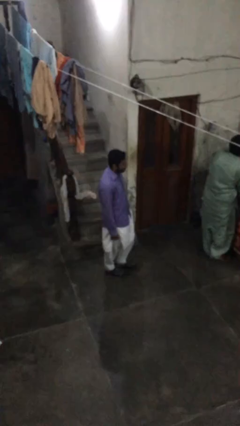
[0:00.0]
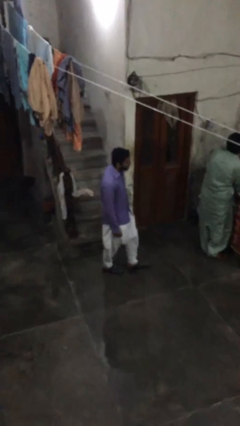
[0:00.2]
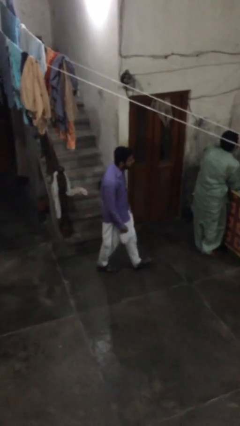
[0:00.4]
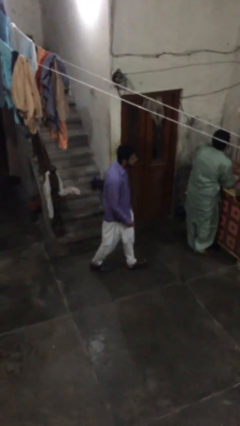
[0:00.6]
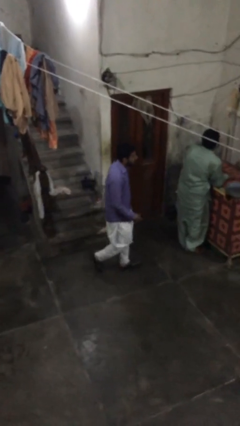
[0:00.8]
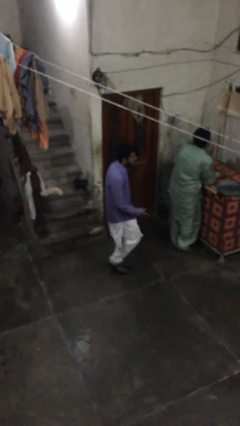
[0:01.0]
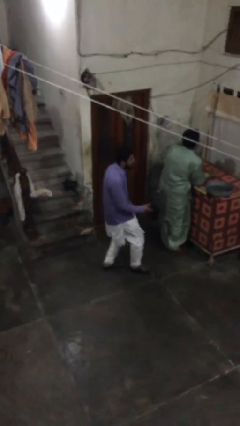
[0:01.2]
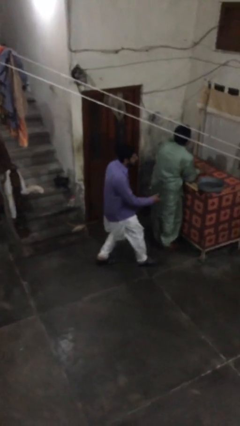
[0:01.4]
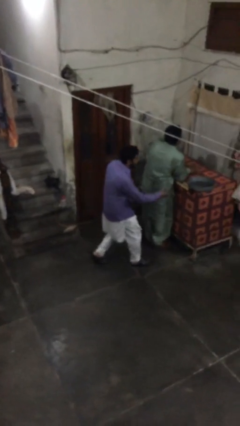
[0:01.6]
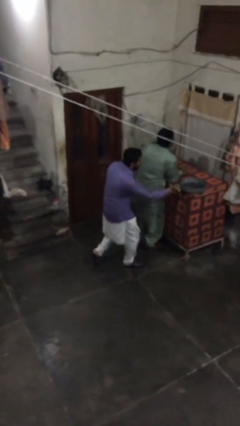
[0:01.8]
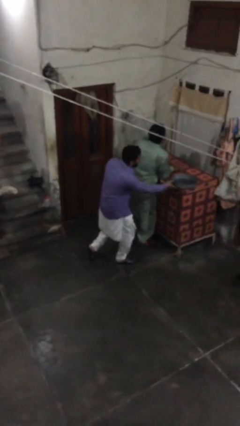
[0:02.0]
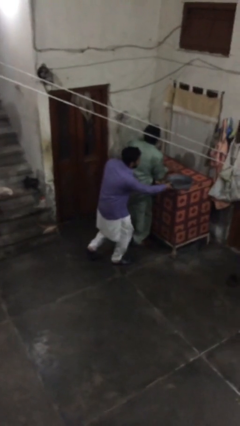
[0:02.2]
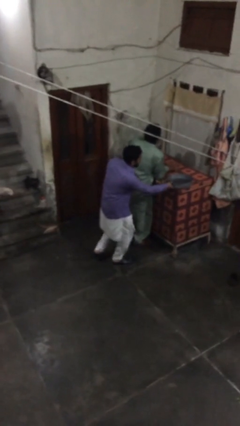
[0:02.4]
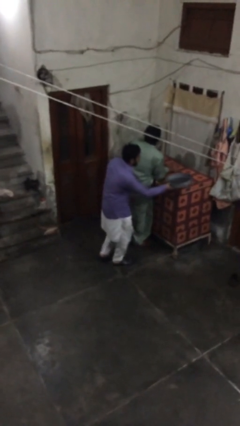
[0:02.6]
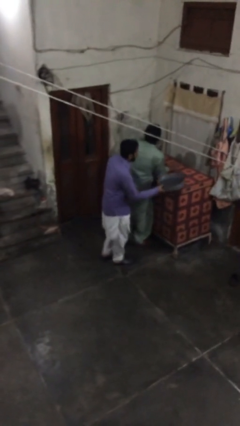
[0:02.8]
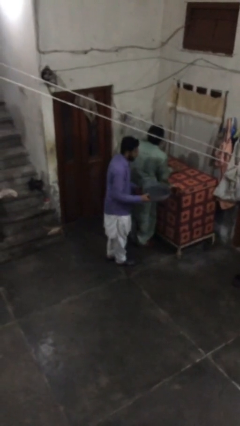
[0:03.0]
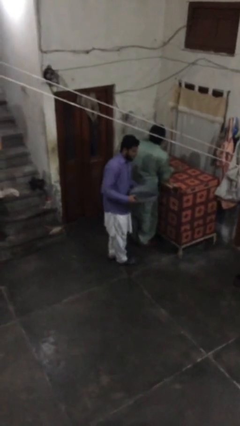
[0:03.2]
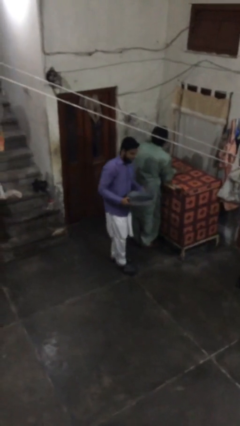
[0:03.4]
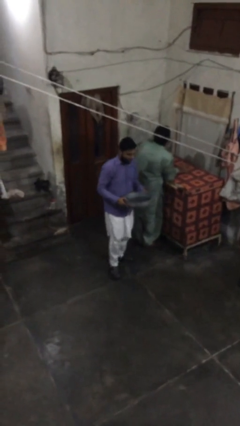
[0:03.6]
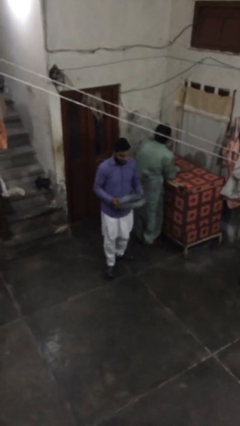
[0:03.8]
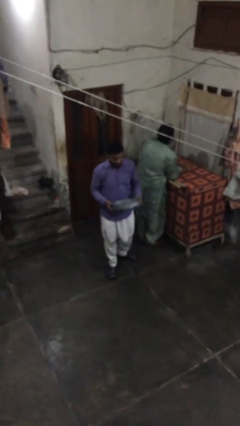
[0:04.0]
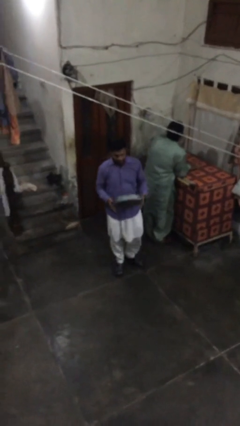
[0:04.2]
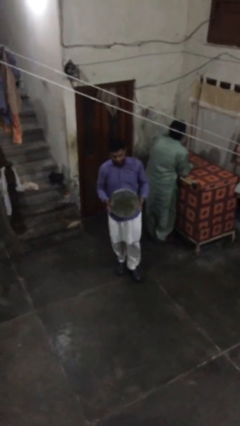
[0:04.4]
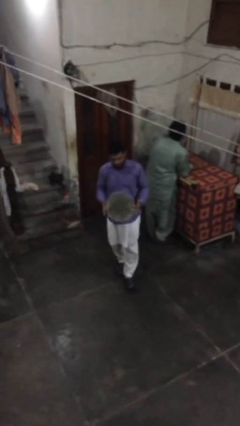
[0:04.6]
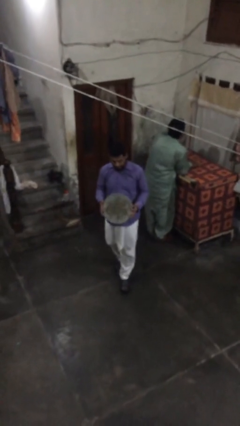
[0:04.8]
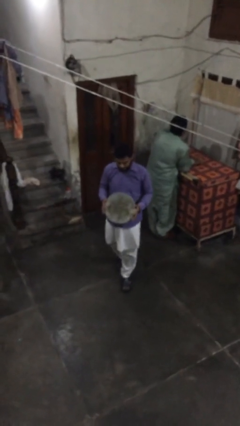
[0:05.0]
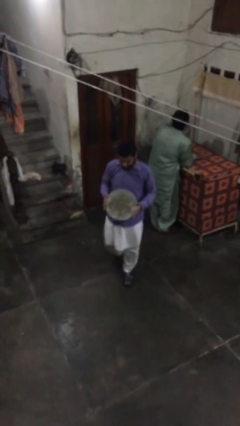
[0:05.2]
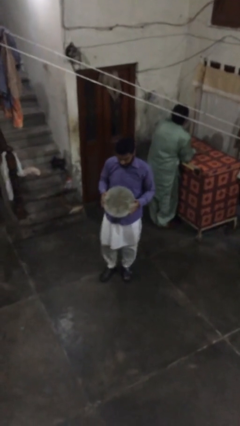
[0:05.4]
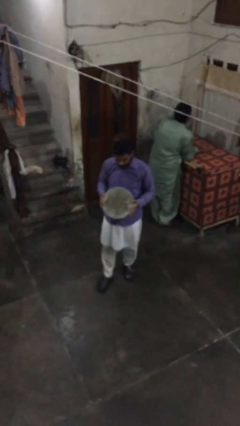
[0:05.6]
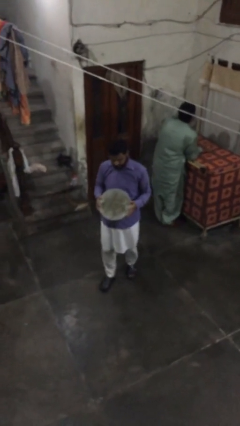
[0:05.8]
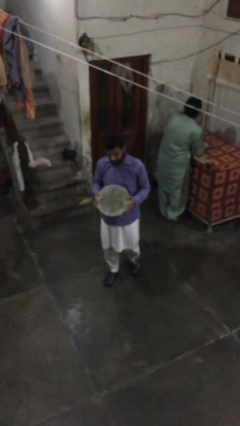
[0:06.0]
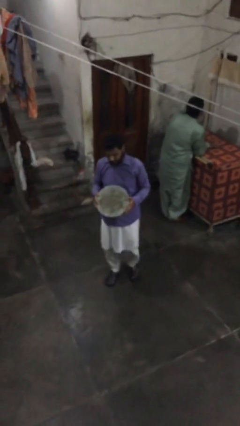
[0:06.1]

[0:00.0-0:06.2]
person steals object from person

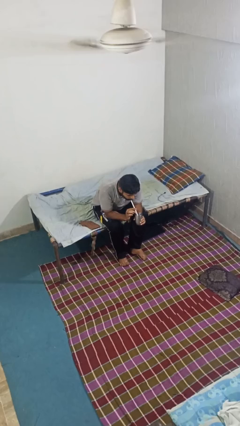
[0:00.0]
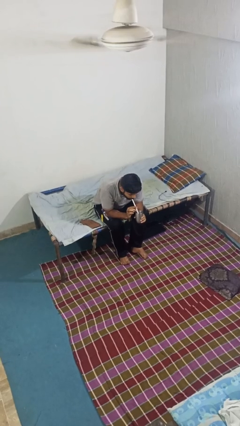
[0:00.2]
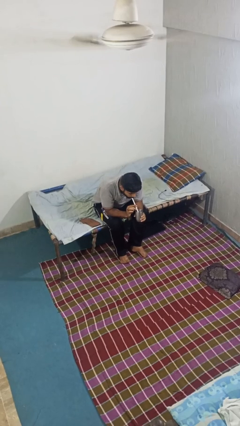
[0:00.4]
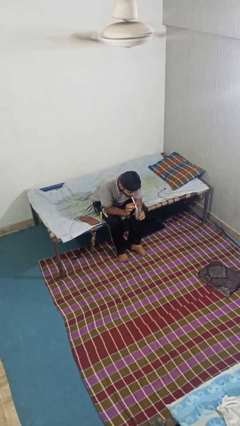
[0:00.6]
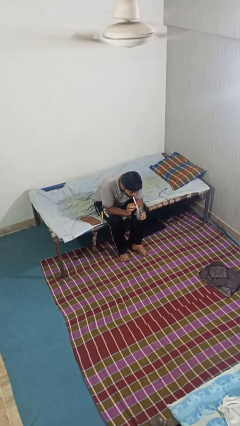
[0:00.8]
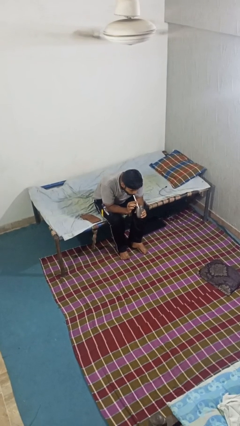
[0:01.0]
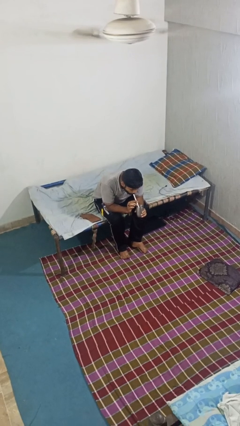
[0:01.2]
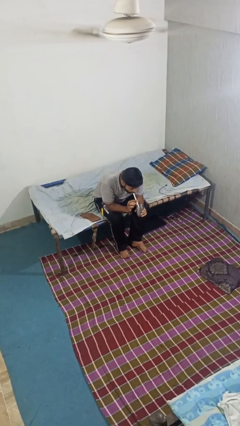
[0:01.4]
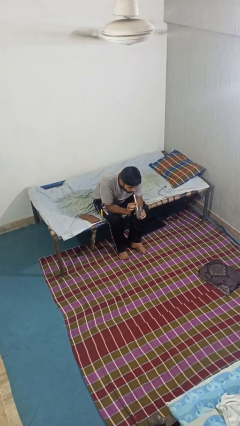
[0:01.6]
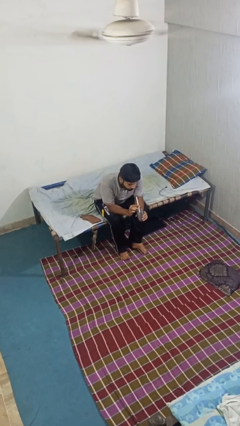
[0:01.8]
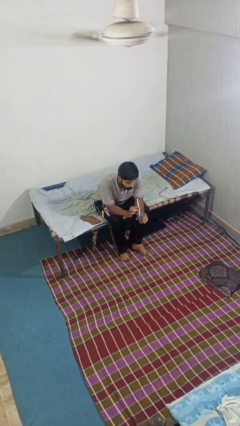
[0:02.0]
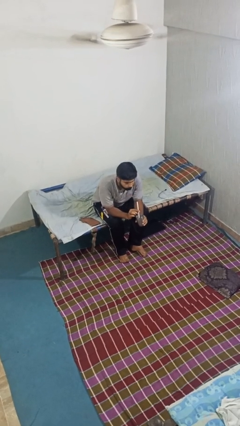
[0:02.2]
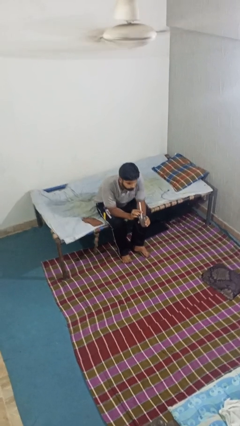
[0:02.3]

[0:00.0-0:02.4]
person drinks from straw

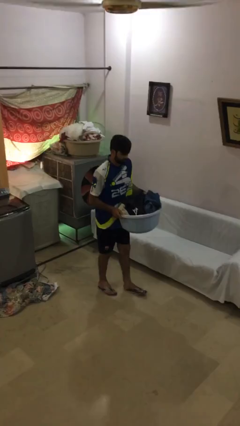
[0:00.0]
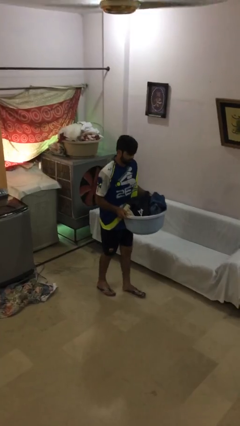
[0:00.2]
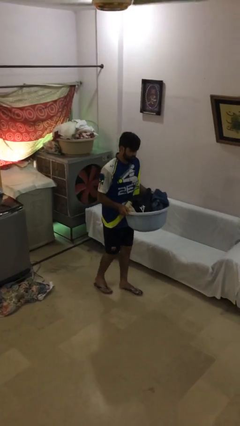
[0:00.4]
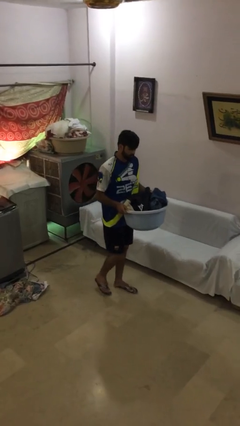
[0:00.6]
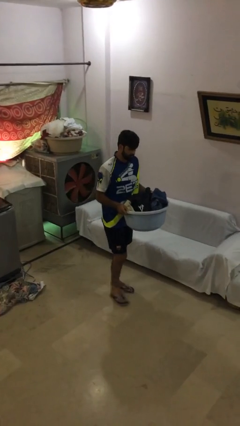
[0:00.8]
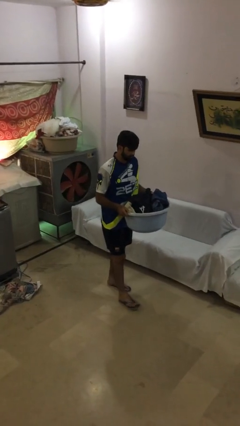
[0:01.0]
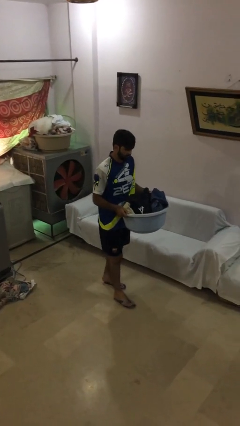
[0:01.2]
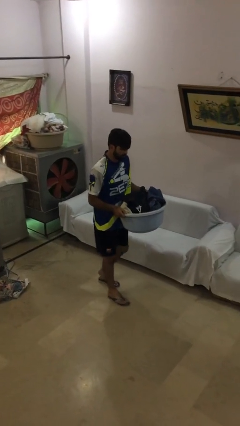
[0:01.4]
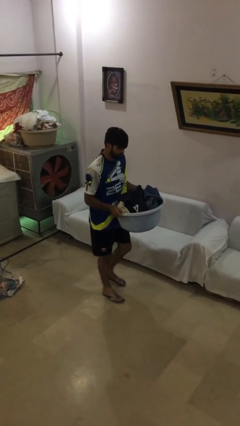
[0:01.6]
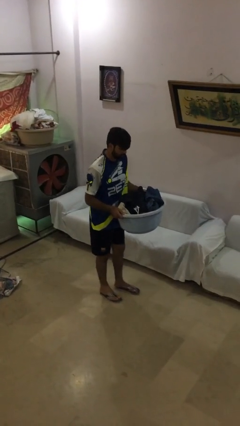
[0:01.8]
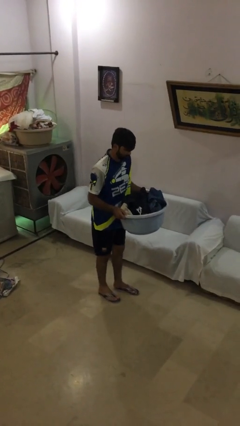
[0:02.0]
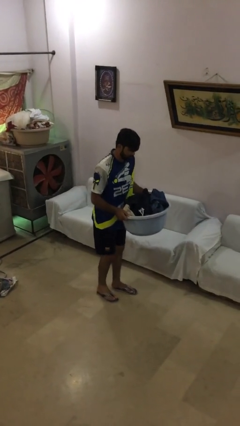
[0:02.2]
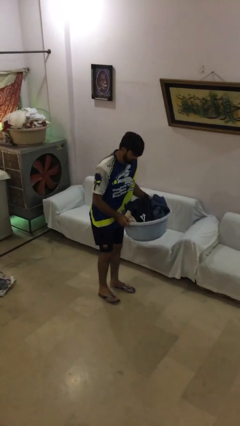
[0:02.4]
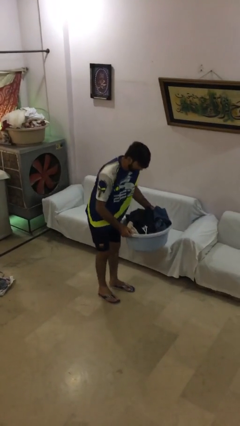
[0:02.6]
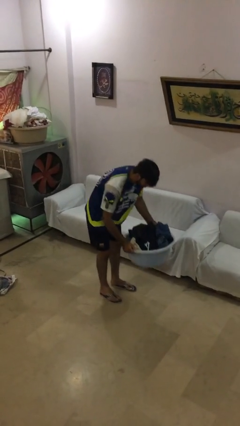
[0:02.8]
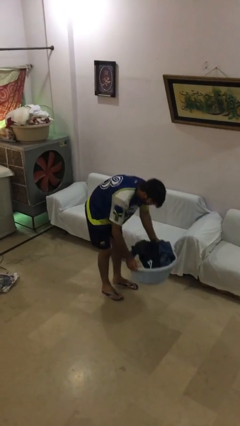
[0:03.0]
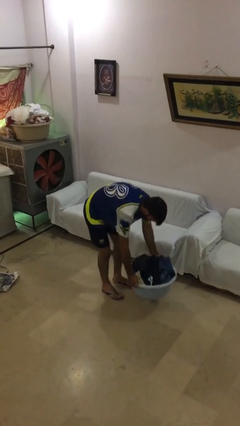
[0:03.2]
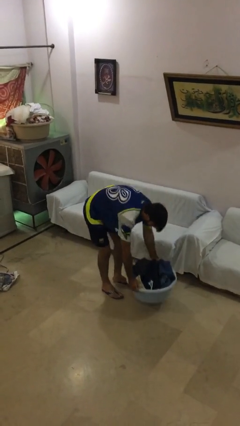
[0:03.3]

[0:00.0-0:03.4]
person puts down object on floor

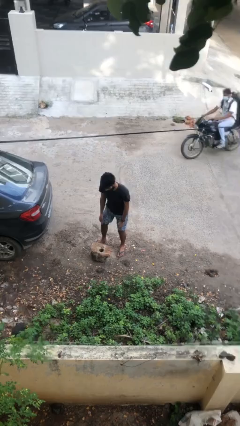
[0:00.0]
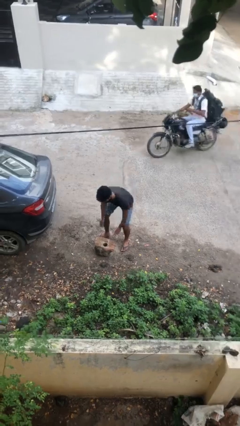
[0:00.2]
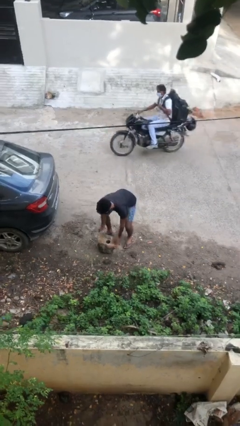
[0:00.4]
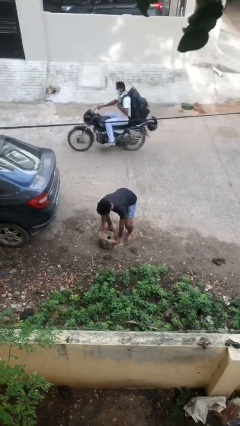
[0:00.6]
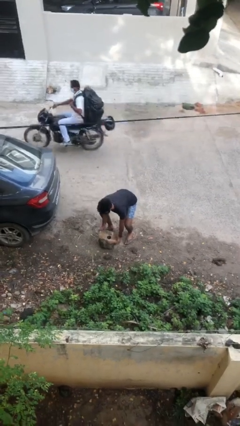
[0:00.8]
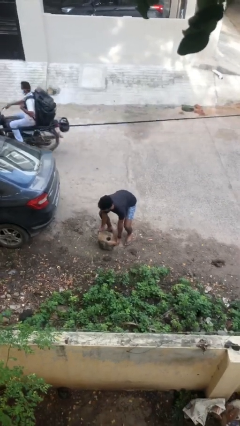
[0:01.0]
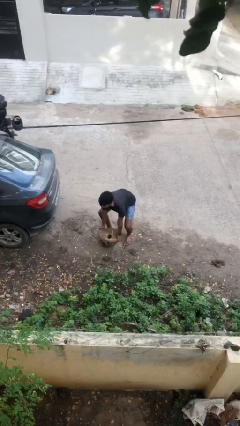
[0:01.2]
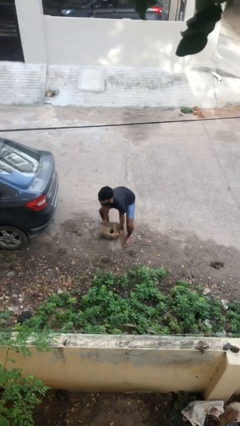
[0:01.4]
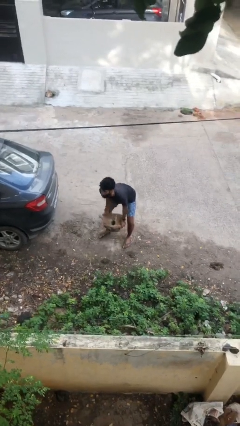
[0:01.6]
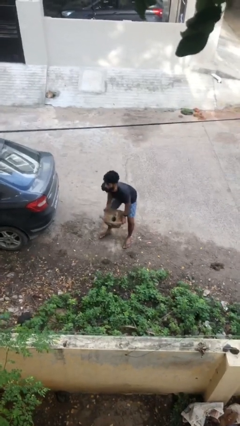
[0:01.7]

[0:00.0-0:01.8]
person picks up object from floor

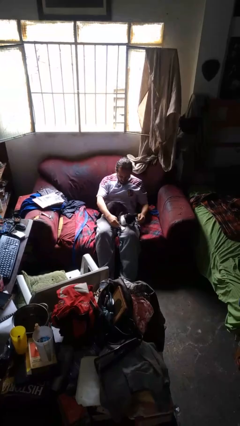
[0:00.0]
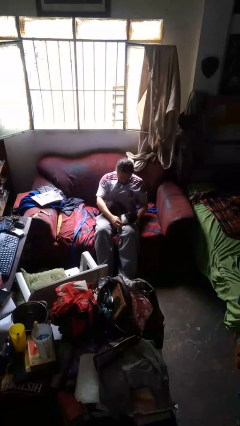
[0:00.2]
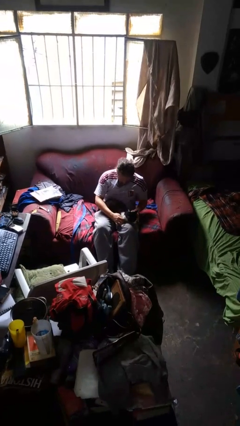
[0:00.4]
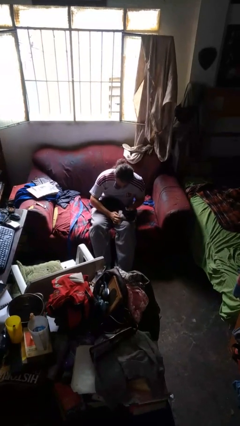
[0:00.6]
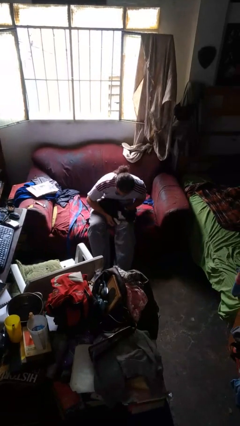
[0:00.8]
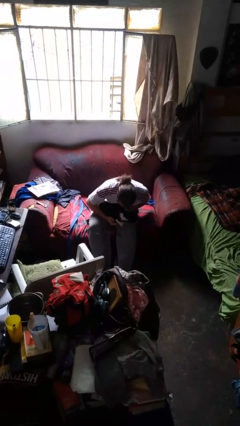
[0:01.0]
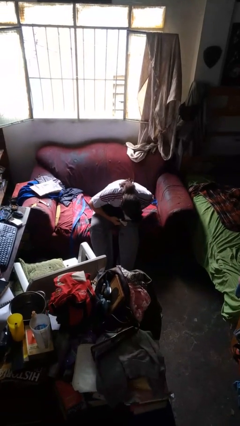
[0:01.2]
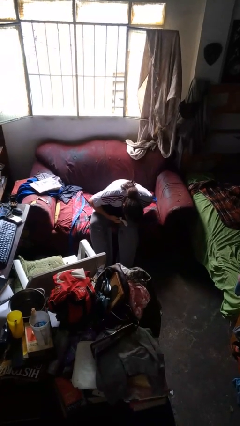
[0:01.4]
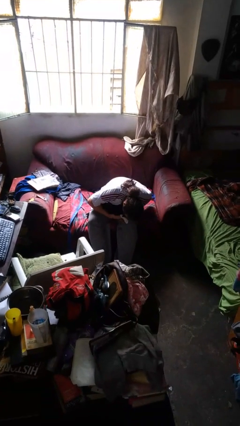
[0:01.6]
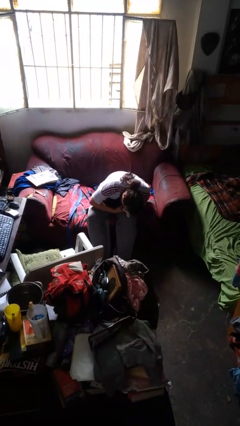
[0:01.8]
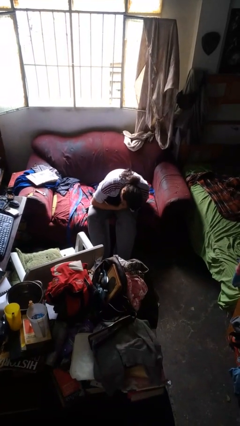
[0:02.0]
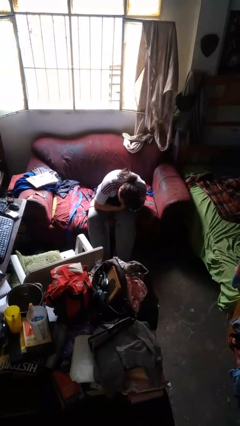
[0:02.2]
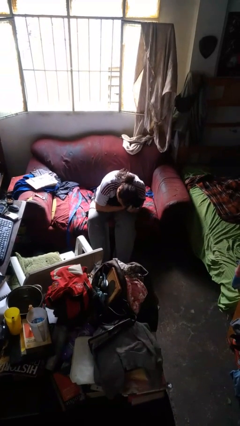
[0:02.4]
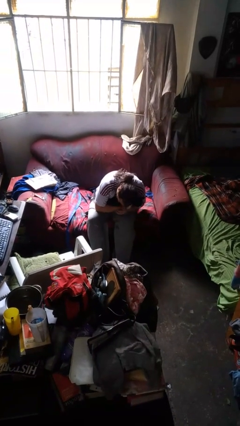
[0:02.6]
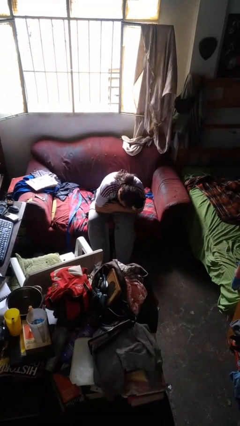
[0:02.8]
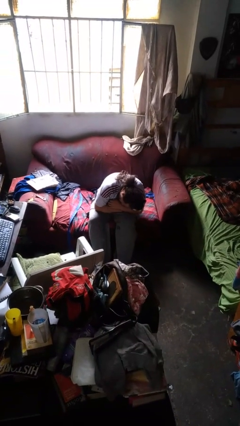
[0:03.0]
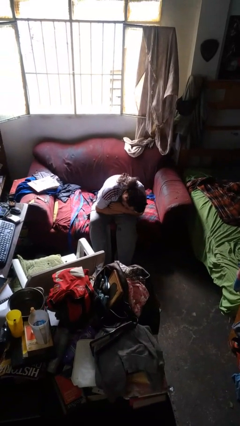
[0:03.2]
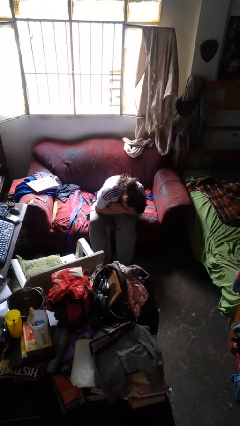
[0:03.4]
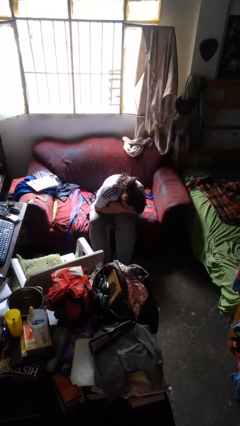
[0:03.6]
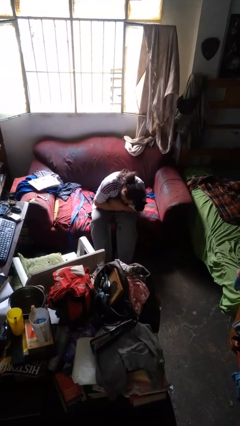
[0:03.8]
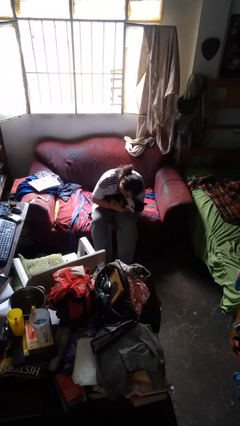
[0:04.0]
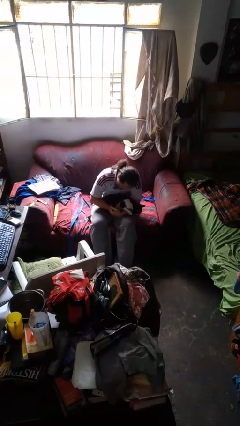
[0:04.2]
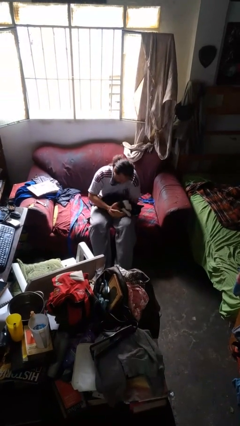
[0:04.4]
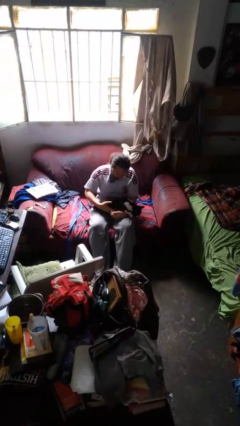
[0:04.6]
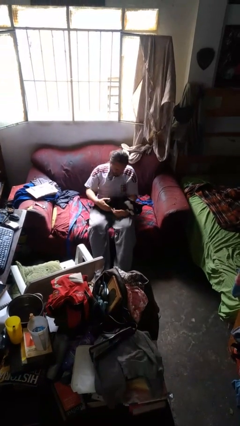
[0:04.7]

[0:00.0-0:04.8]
person hugs dog
